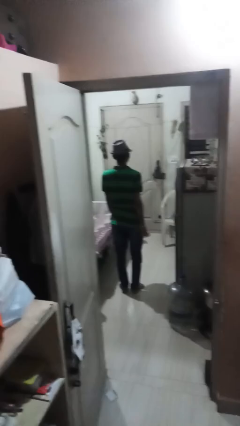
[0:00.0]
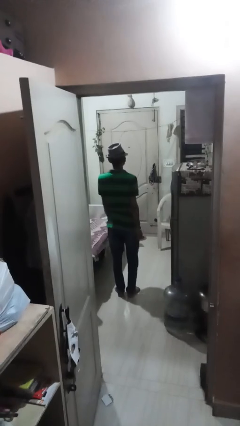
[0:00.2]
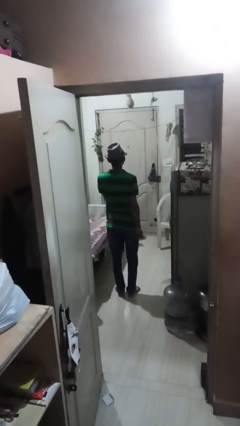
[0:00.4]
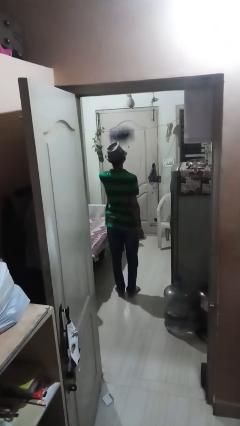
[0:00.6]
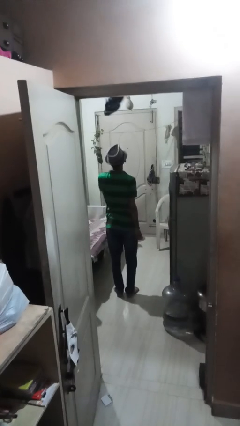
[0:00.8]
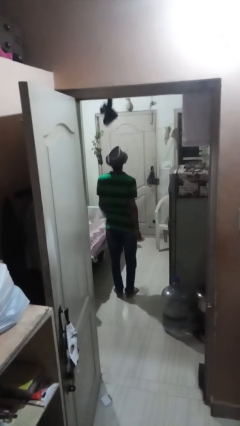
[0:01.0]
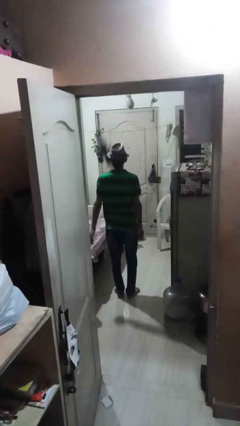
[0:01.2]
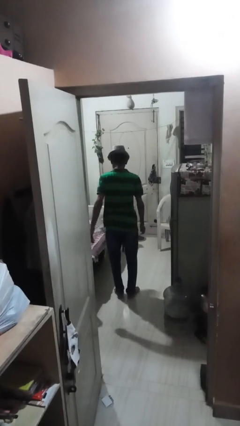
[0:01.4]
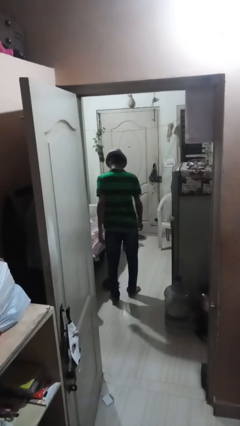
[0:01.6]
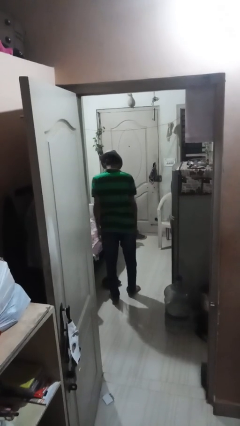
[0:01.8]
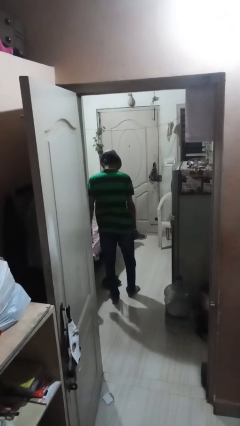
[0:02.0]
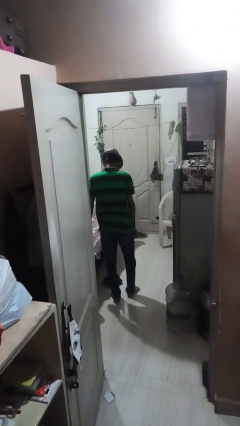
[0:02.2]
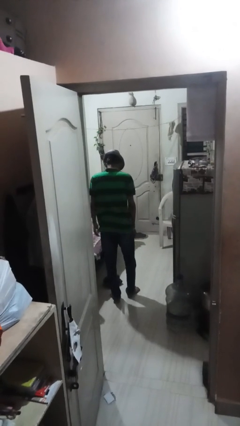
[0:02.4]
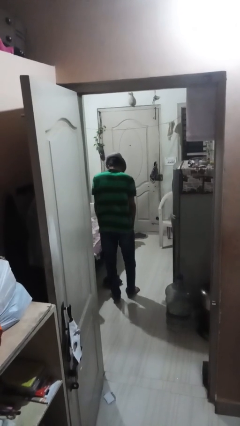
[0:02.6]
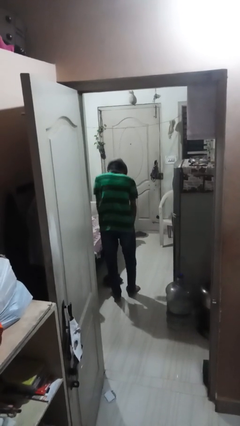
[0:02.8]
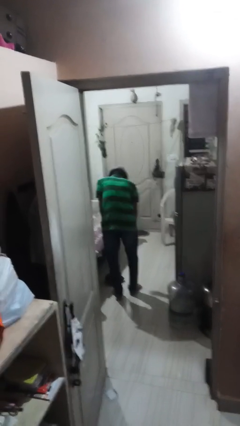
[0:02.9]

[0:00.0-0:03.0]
person throws object into air

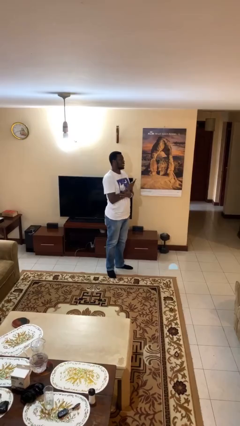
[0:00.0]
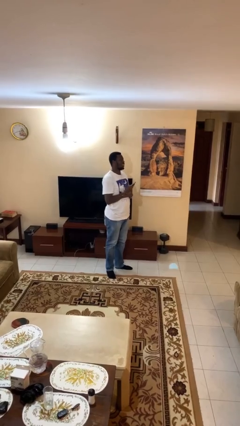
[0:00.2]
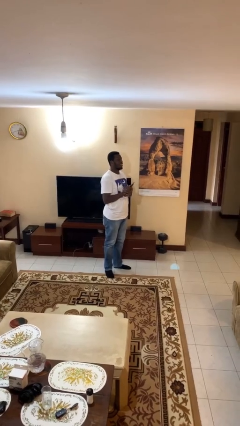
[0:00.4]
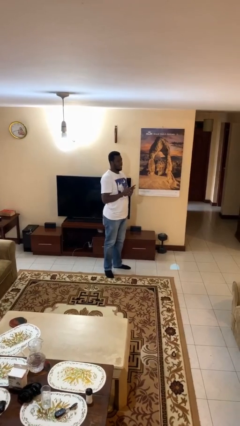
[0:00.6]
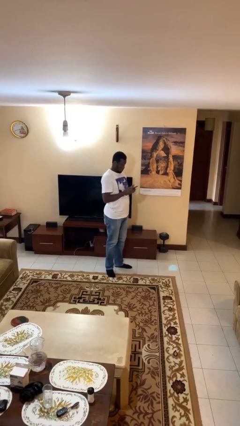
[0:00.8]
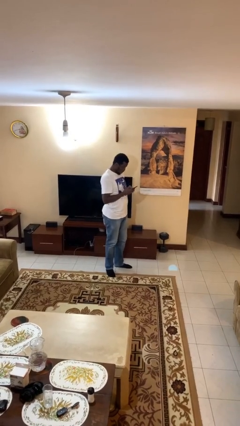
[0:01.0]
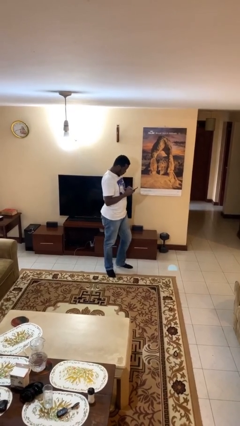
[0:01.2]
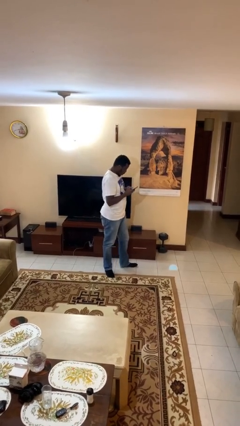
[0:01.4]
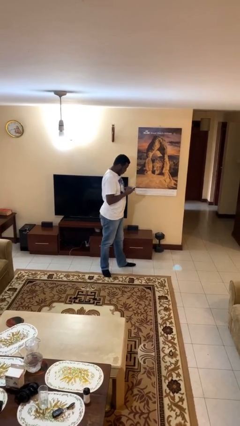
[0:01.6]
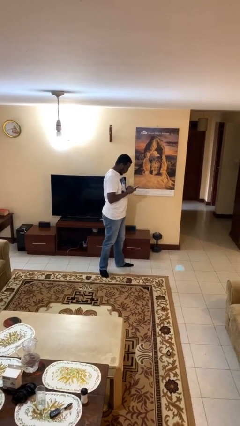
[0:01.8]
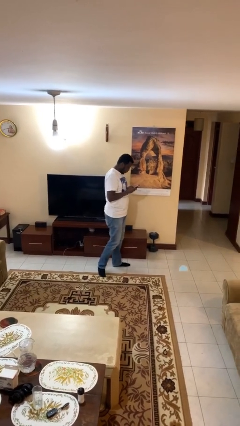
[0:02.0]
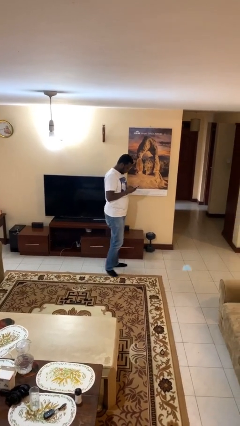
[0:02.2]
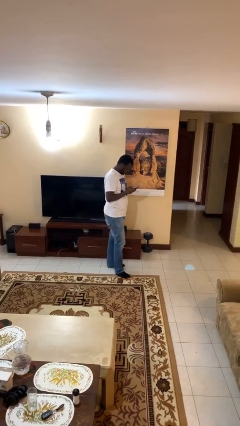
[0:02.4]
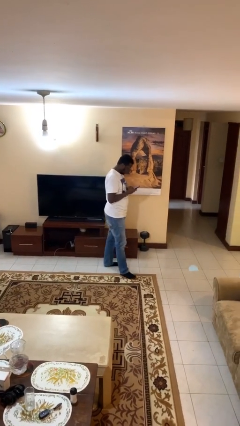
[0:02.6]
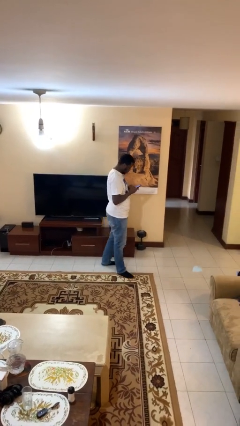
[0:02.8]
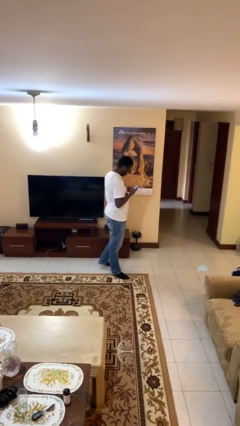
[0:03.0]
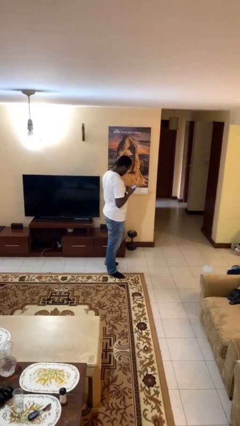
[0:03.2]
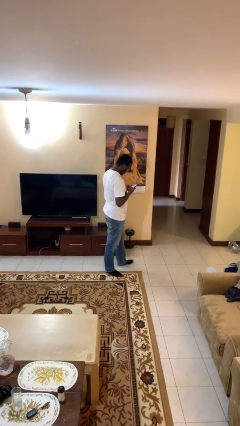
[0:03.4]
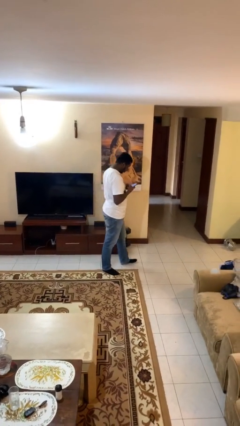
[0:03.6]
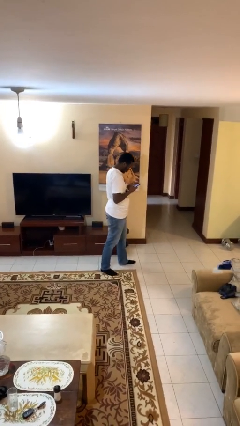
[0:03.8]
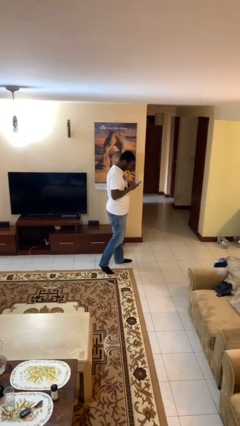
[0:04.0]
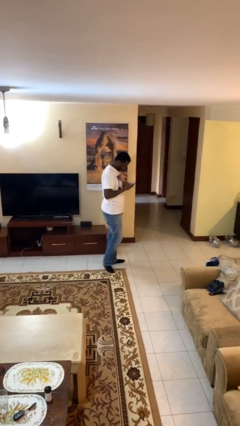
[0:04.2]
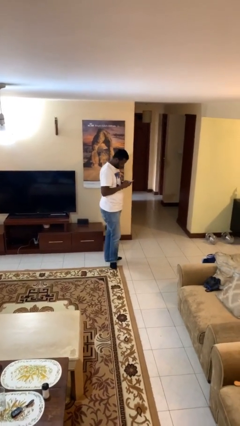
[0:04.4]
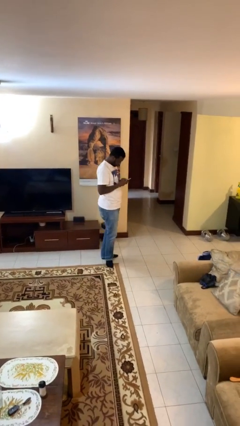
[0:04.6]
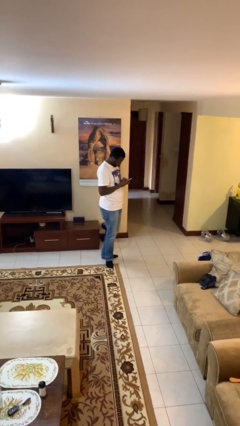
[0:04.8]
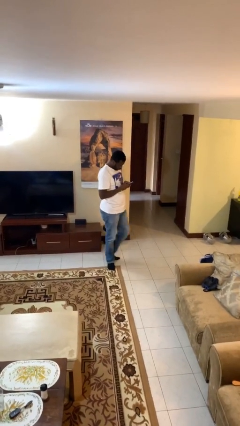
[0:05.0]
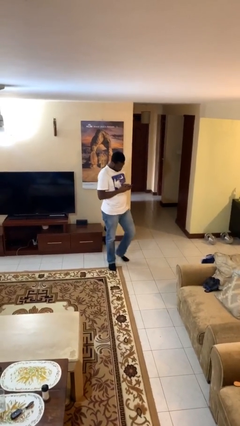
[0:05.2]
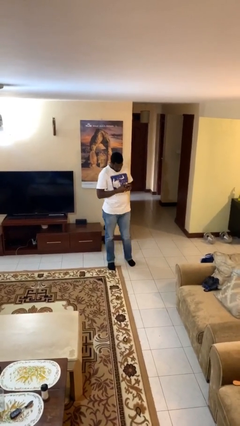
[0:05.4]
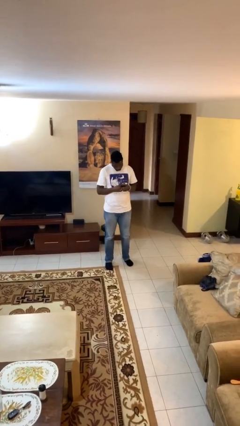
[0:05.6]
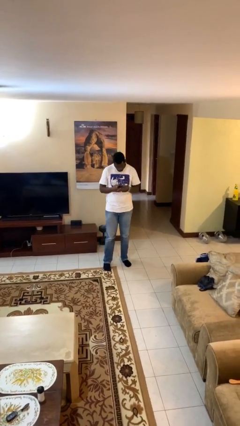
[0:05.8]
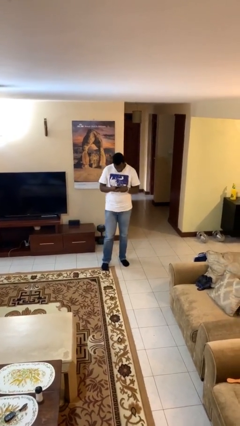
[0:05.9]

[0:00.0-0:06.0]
person texts on phone

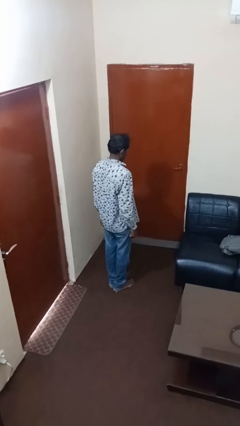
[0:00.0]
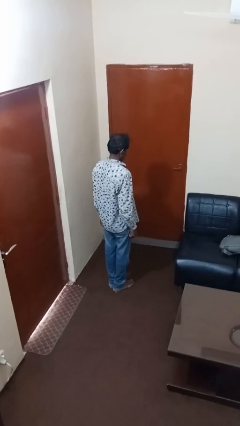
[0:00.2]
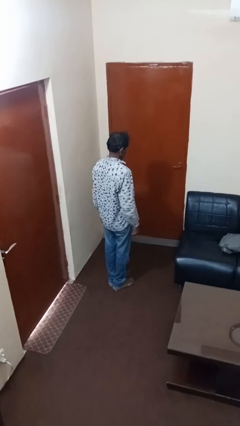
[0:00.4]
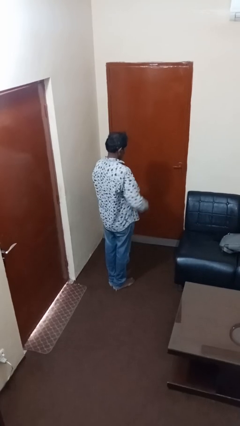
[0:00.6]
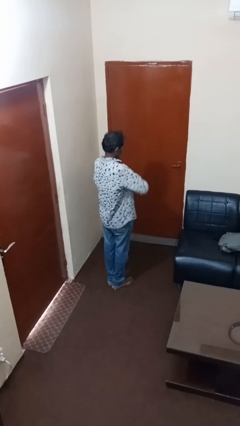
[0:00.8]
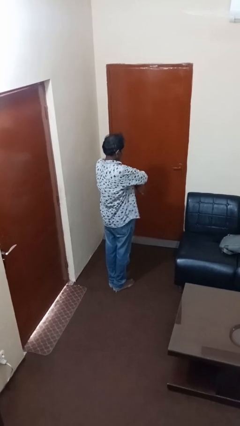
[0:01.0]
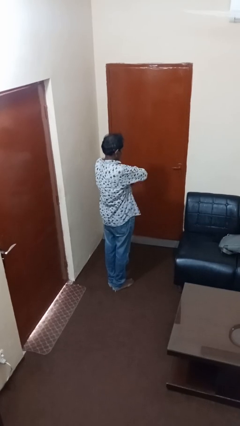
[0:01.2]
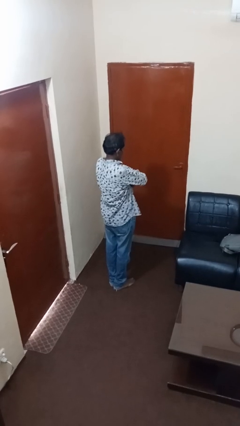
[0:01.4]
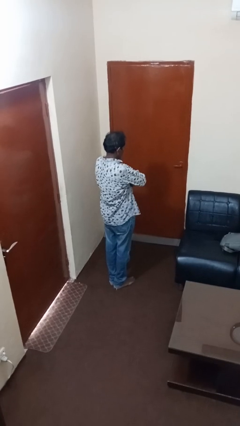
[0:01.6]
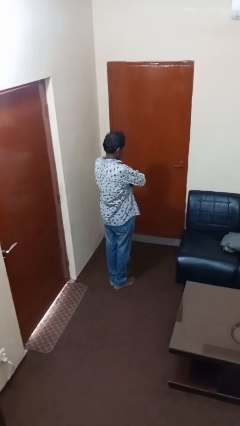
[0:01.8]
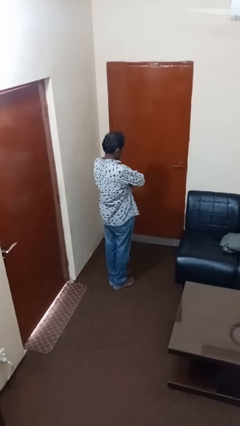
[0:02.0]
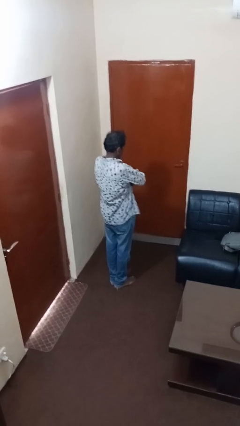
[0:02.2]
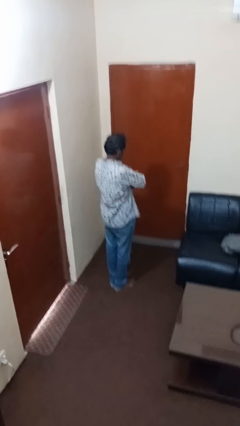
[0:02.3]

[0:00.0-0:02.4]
person crosses arms

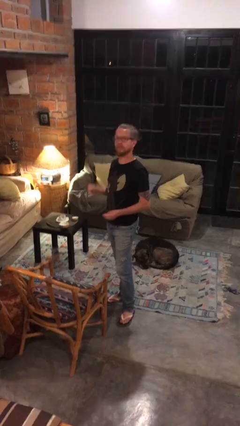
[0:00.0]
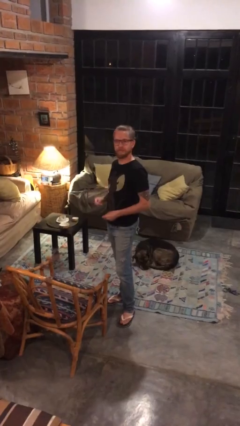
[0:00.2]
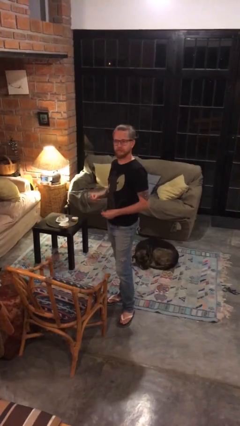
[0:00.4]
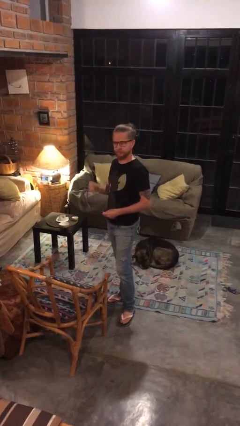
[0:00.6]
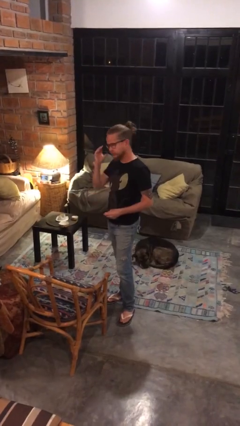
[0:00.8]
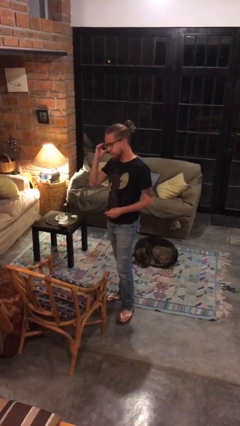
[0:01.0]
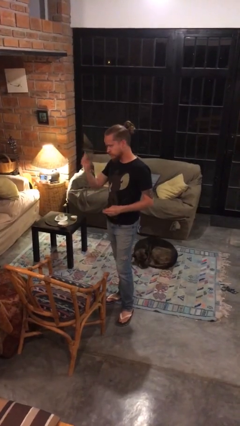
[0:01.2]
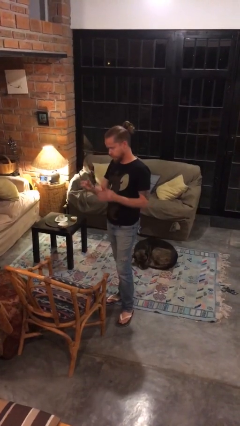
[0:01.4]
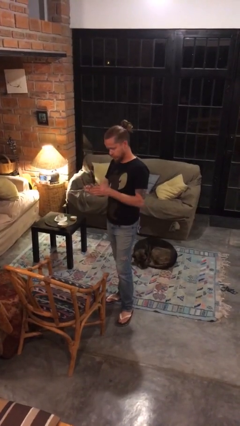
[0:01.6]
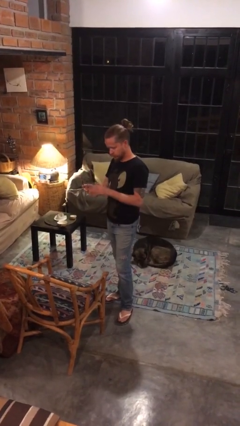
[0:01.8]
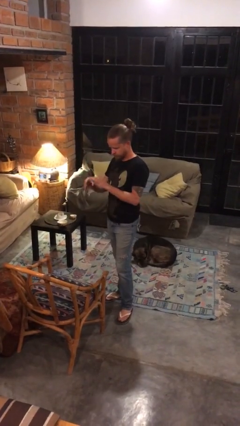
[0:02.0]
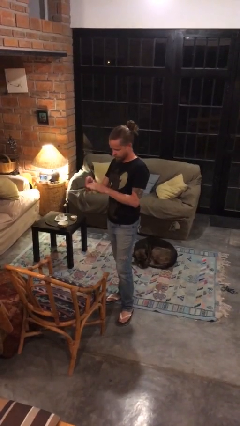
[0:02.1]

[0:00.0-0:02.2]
person takes off glasses

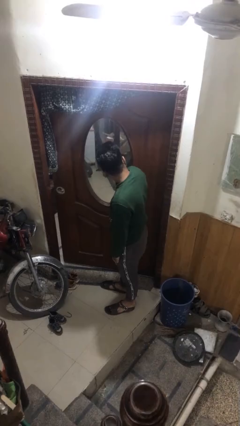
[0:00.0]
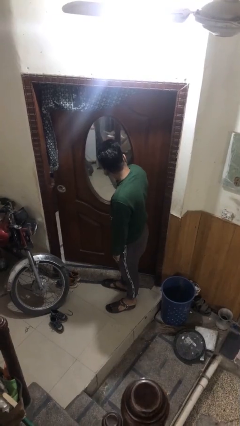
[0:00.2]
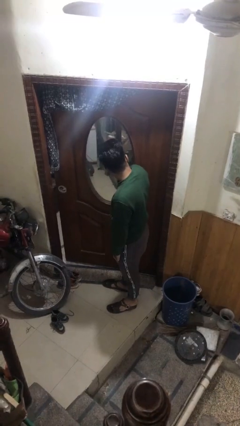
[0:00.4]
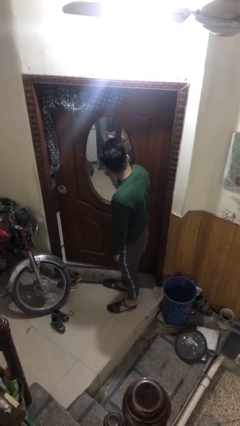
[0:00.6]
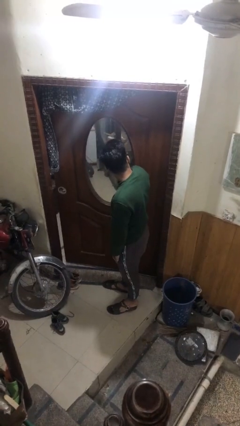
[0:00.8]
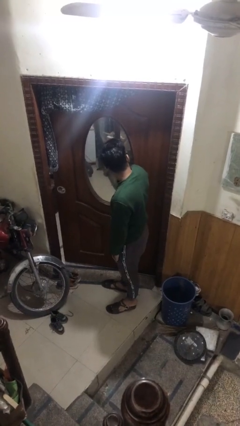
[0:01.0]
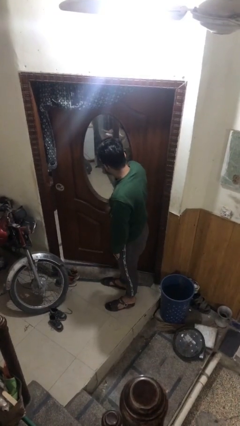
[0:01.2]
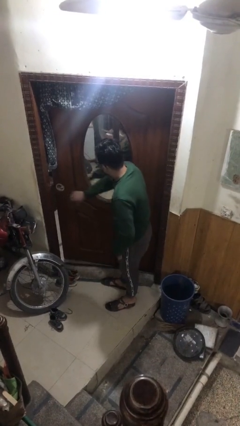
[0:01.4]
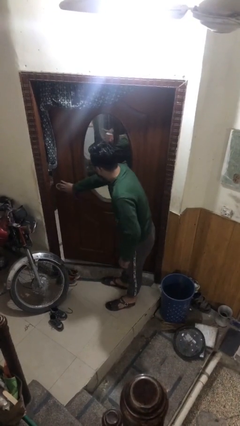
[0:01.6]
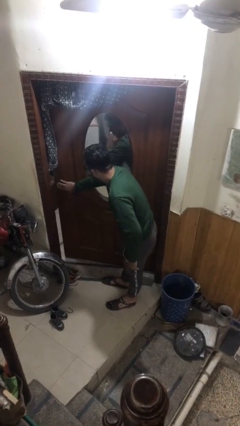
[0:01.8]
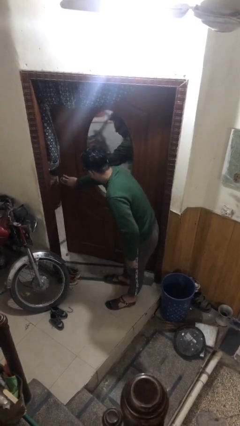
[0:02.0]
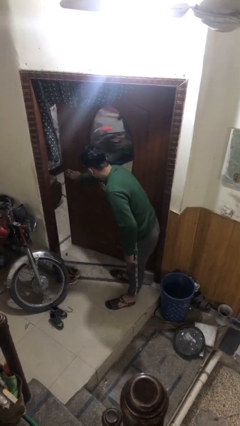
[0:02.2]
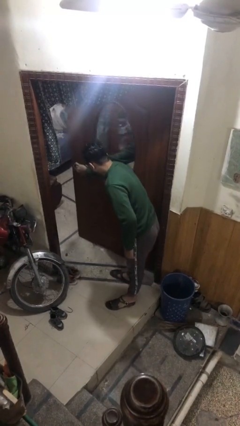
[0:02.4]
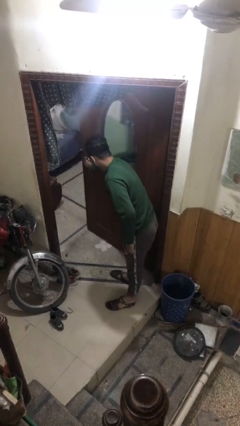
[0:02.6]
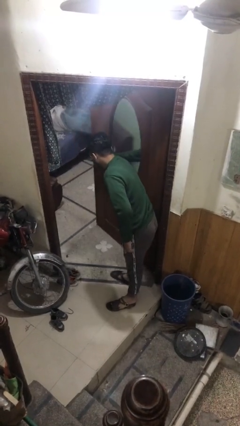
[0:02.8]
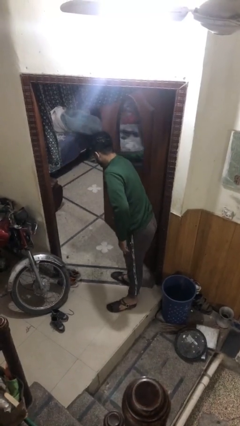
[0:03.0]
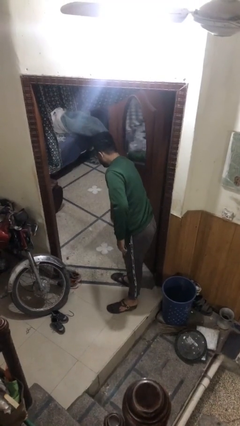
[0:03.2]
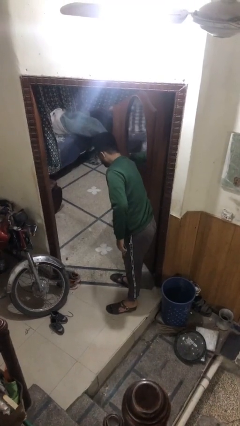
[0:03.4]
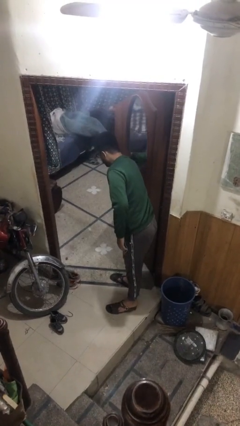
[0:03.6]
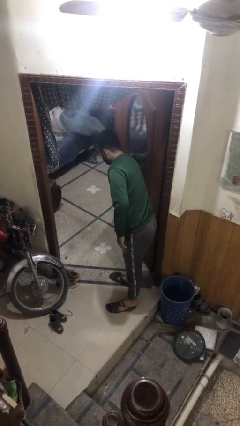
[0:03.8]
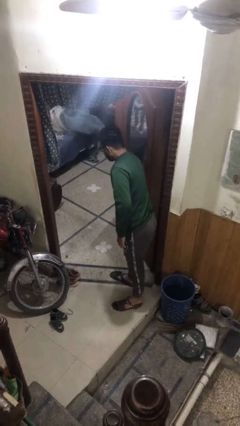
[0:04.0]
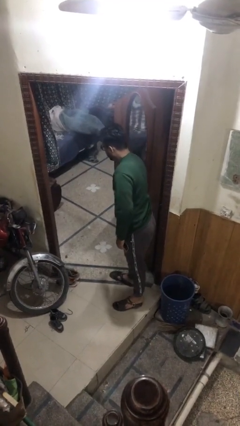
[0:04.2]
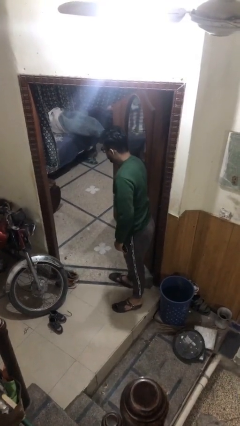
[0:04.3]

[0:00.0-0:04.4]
person opens facility door
